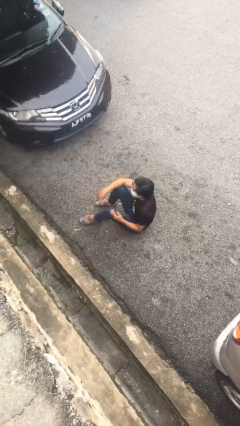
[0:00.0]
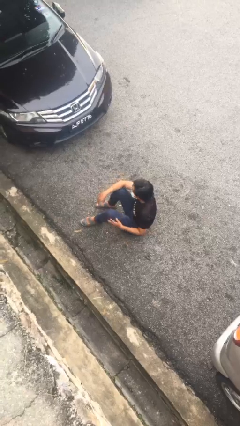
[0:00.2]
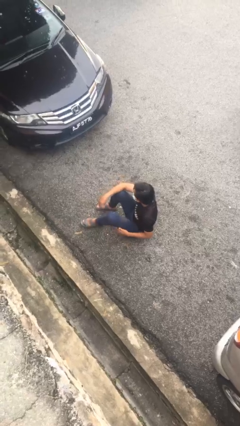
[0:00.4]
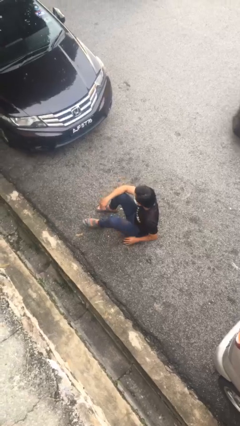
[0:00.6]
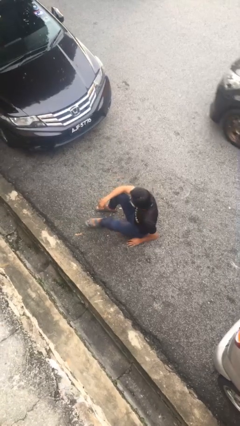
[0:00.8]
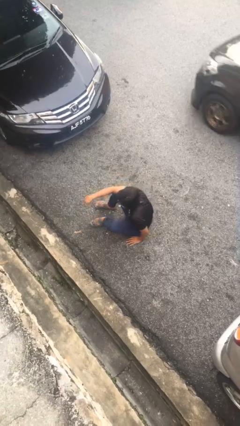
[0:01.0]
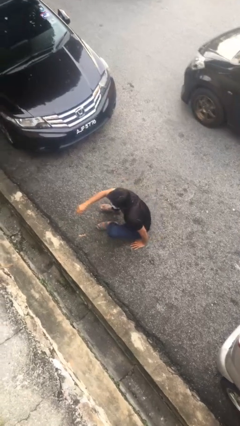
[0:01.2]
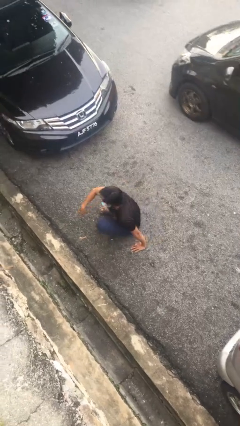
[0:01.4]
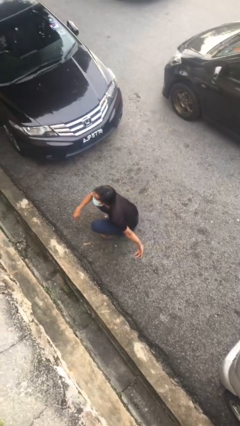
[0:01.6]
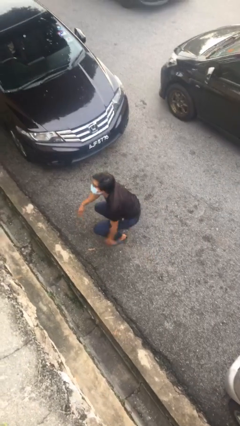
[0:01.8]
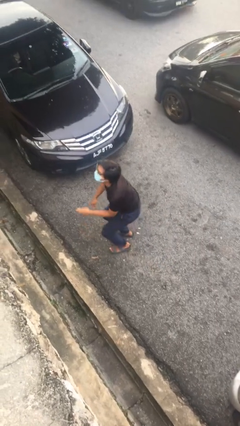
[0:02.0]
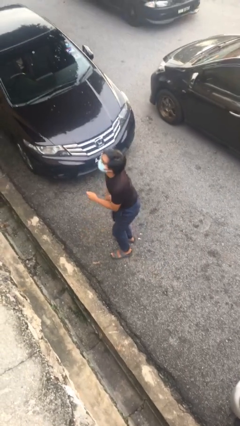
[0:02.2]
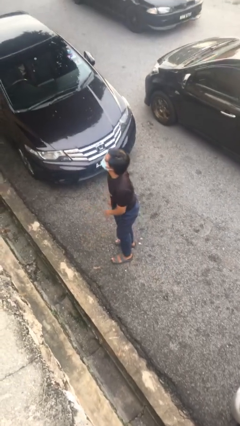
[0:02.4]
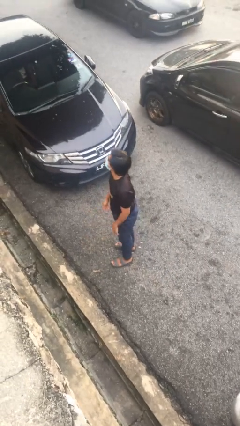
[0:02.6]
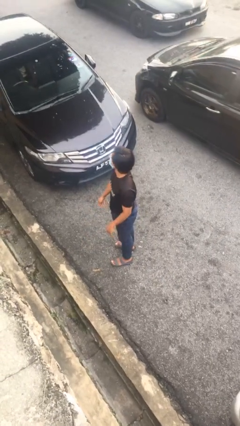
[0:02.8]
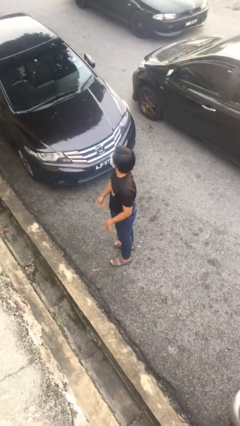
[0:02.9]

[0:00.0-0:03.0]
person stands up

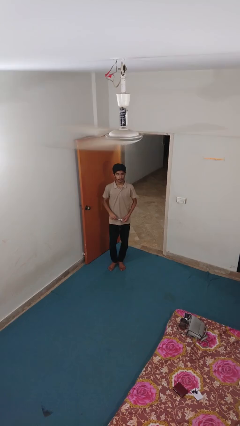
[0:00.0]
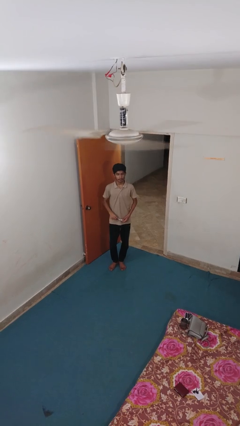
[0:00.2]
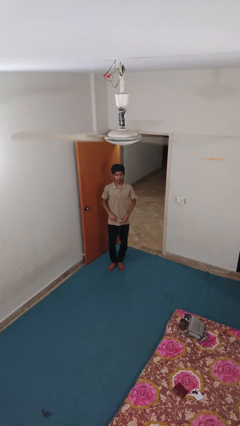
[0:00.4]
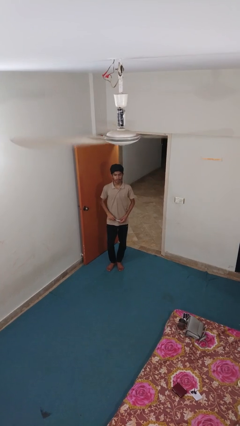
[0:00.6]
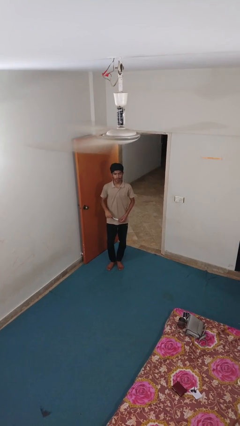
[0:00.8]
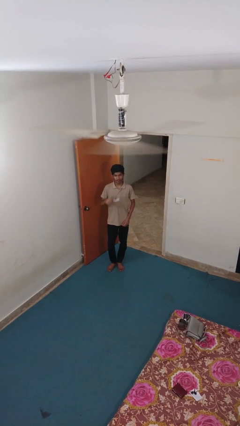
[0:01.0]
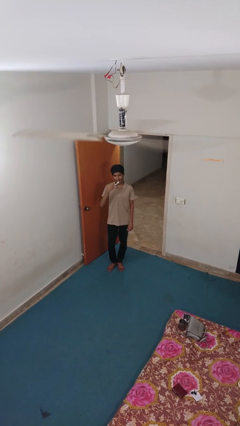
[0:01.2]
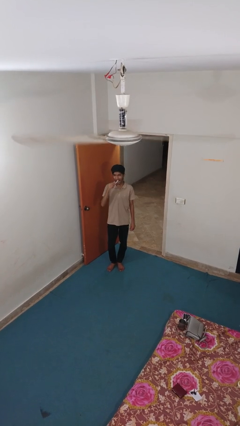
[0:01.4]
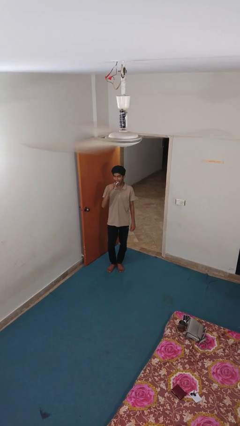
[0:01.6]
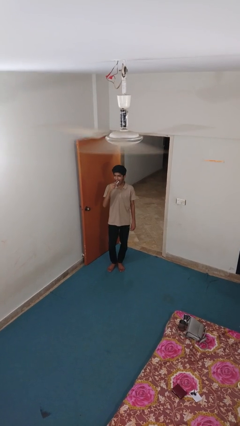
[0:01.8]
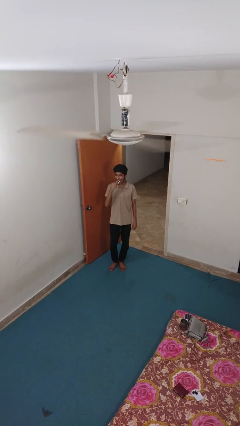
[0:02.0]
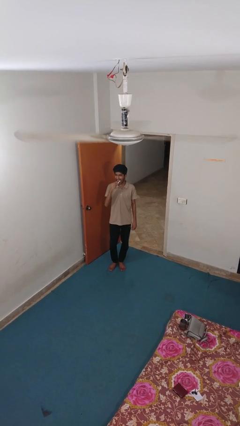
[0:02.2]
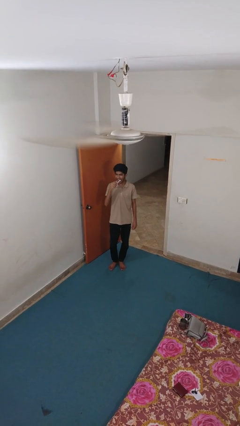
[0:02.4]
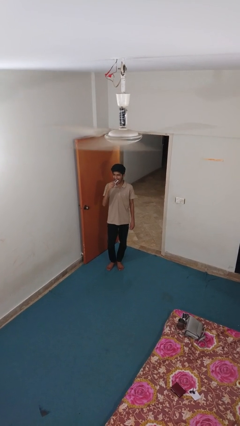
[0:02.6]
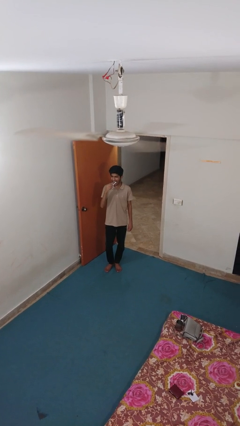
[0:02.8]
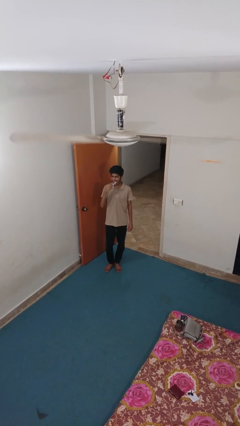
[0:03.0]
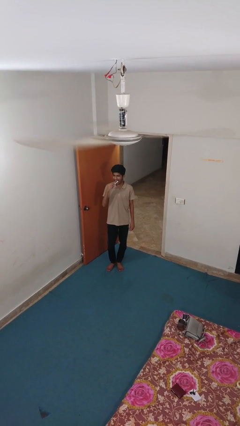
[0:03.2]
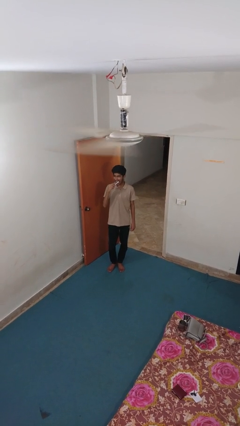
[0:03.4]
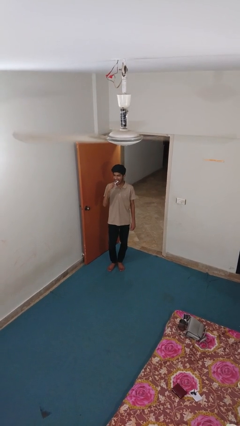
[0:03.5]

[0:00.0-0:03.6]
person brushes teeth

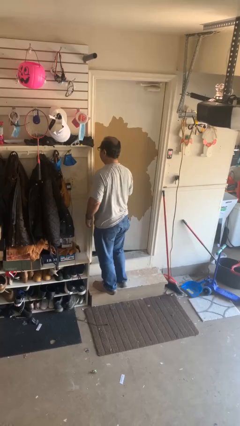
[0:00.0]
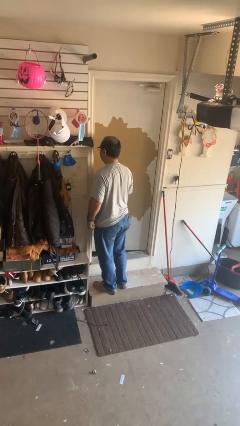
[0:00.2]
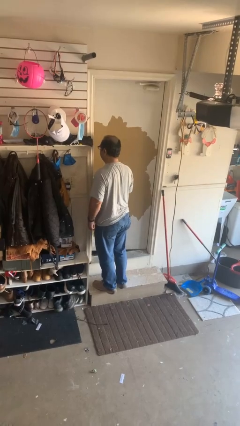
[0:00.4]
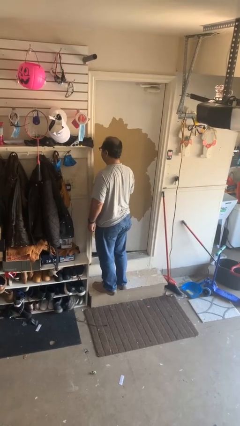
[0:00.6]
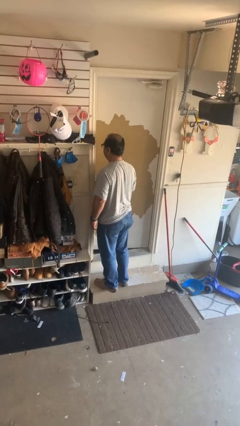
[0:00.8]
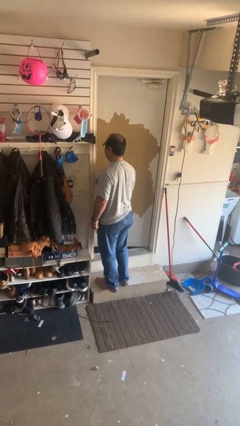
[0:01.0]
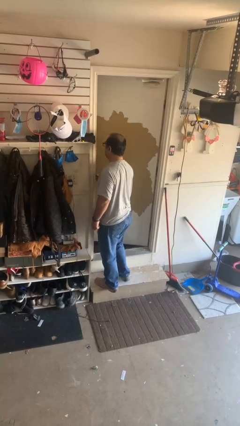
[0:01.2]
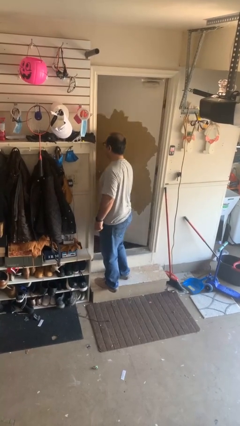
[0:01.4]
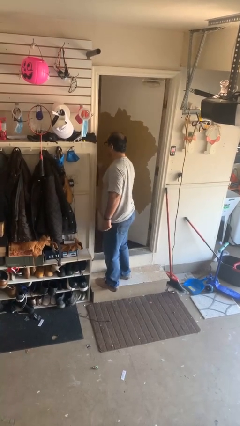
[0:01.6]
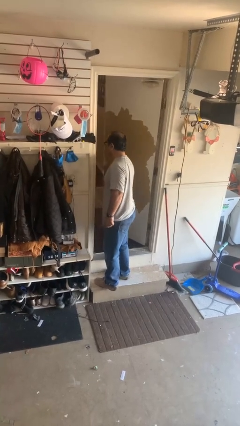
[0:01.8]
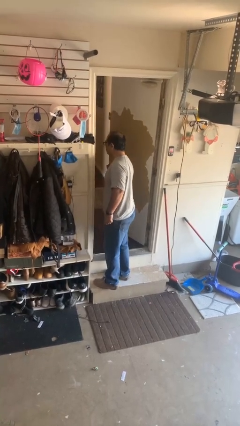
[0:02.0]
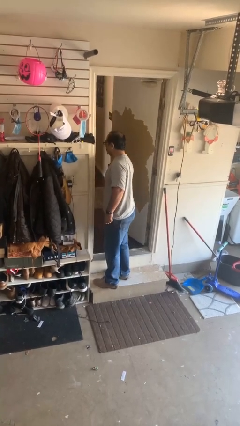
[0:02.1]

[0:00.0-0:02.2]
person opens facility door

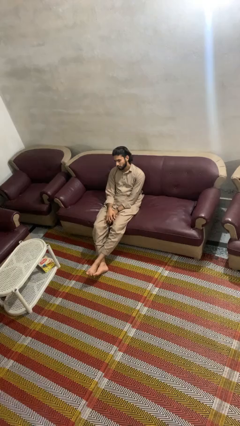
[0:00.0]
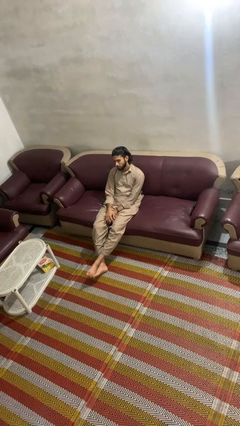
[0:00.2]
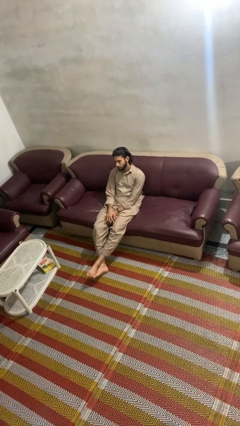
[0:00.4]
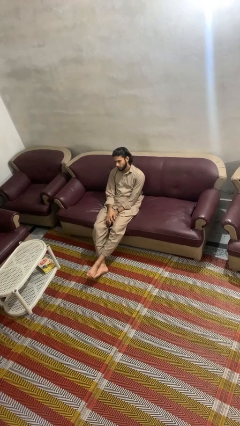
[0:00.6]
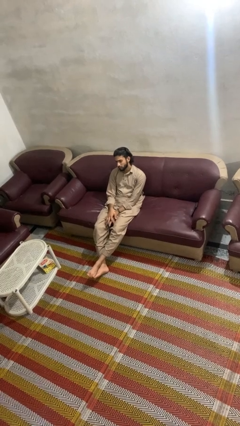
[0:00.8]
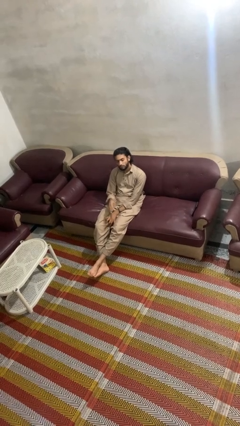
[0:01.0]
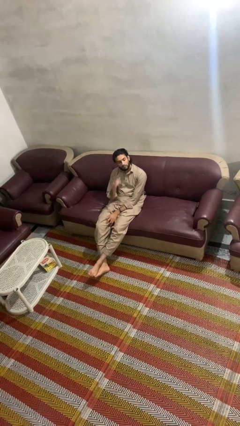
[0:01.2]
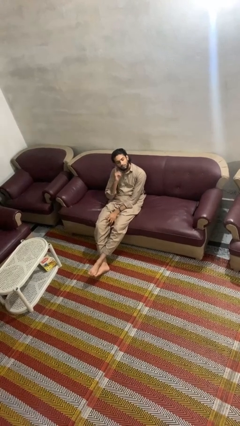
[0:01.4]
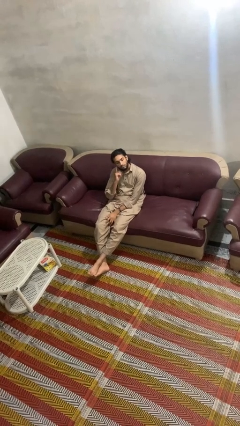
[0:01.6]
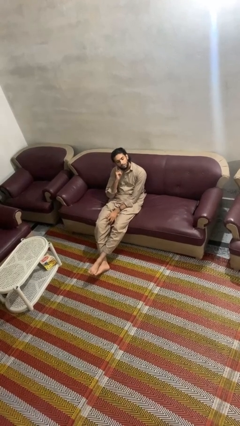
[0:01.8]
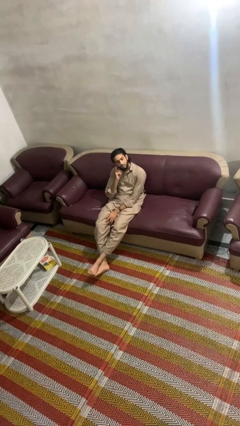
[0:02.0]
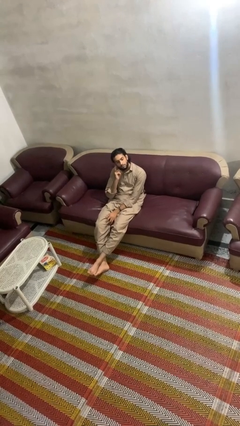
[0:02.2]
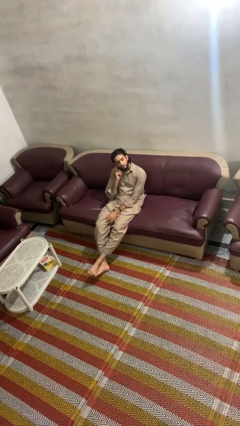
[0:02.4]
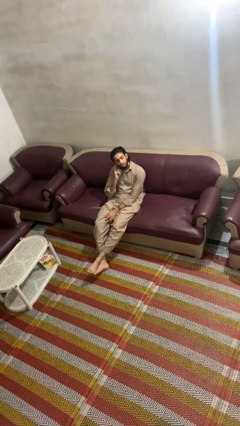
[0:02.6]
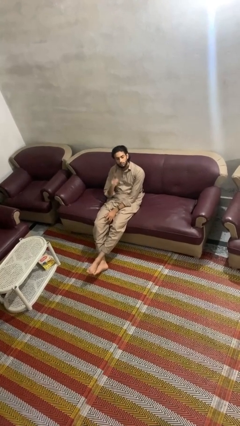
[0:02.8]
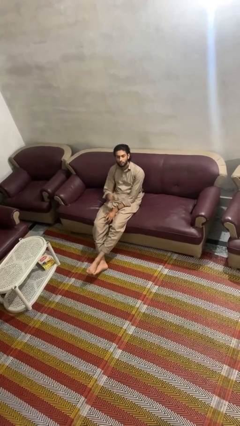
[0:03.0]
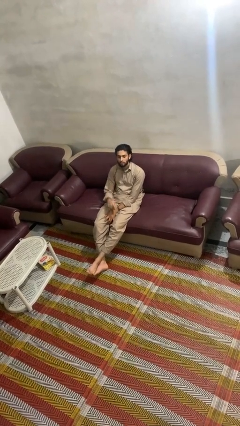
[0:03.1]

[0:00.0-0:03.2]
person gestures listen closely

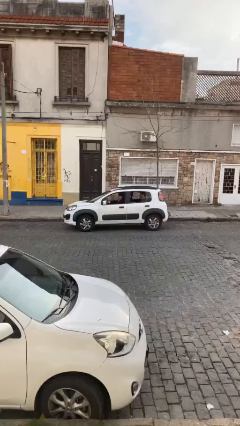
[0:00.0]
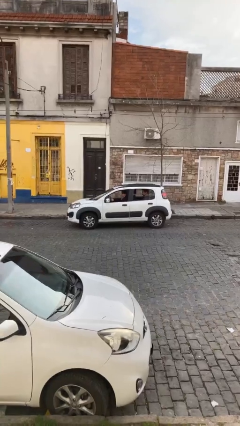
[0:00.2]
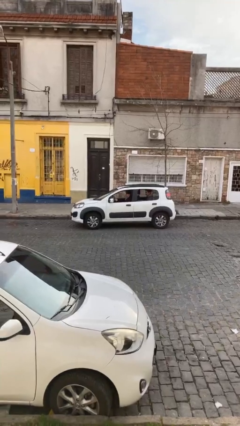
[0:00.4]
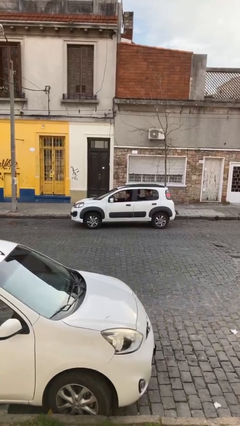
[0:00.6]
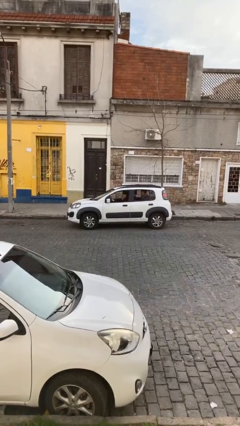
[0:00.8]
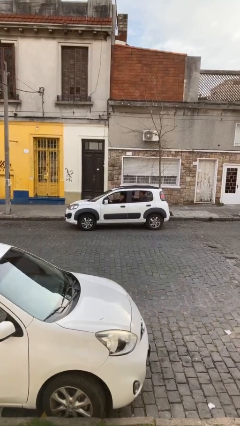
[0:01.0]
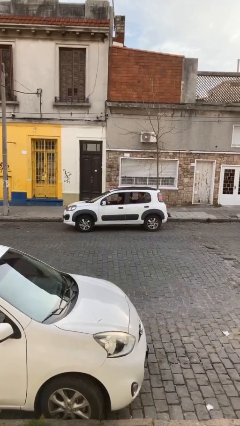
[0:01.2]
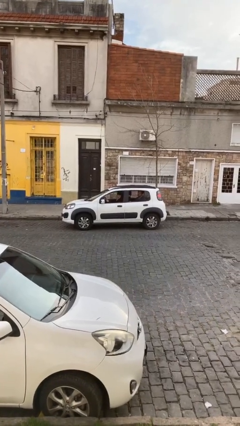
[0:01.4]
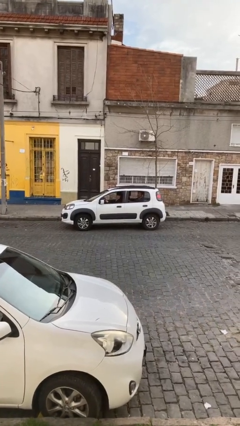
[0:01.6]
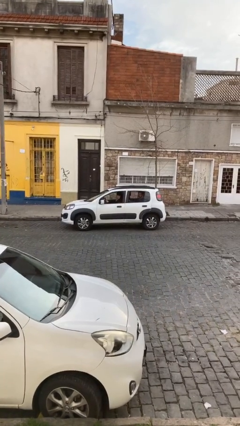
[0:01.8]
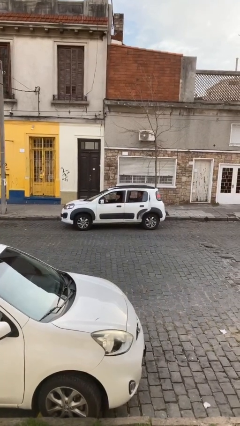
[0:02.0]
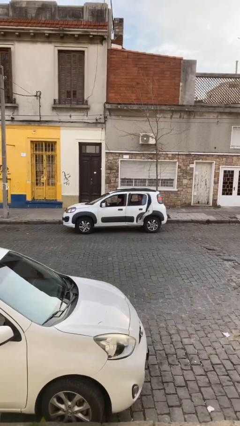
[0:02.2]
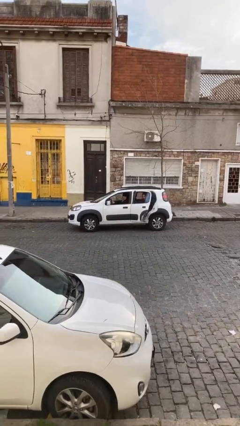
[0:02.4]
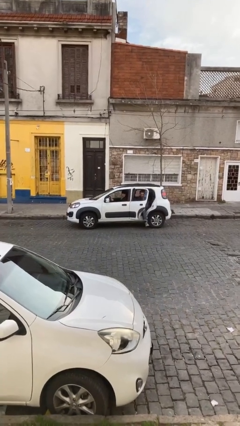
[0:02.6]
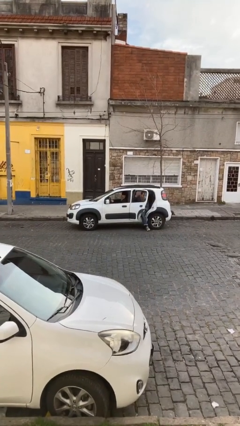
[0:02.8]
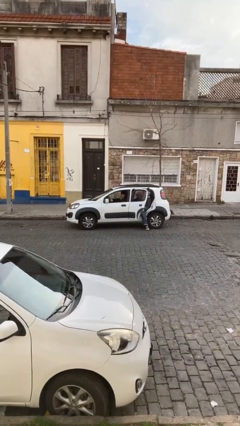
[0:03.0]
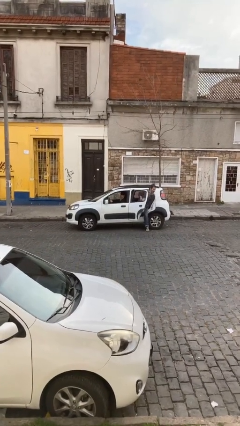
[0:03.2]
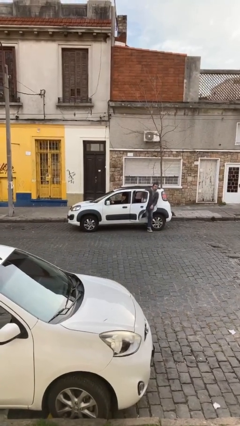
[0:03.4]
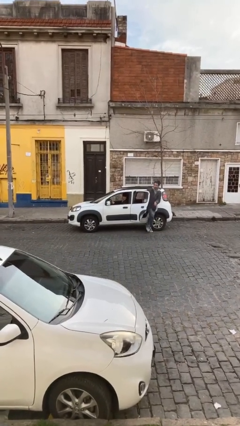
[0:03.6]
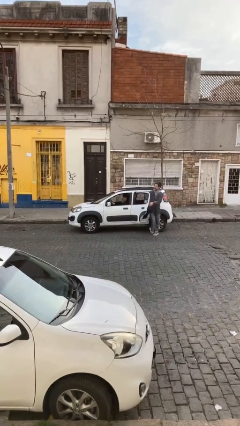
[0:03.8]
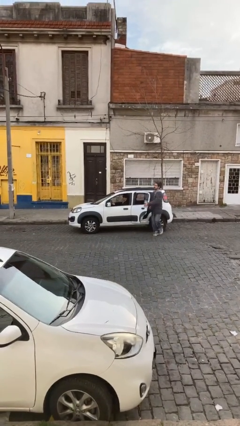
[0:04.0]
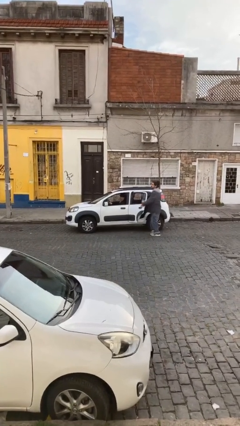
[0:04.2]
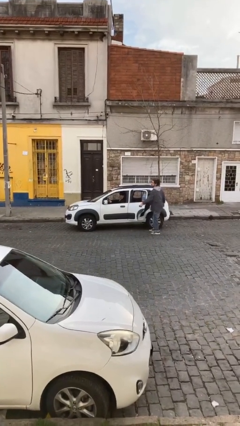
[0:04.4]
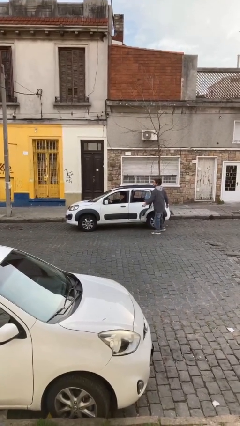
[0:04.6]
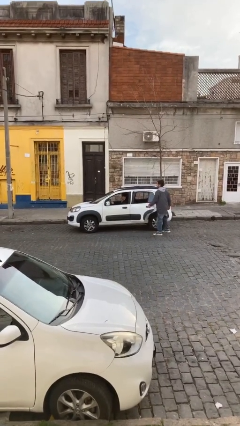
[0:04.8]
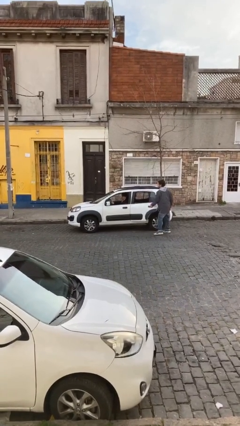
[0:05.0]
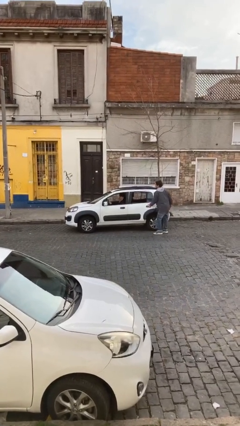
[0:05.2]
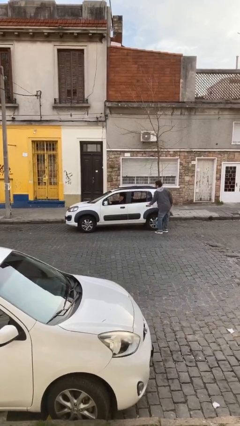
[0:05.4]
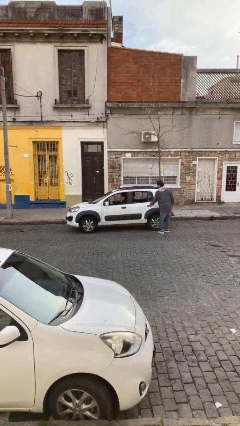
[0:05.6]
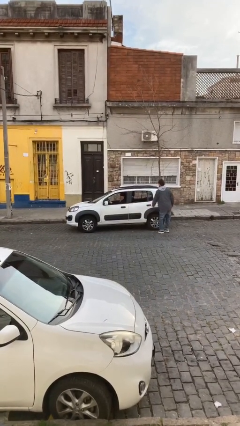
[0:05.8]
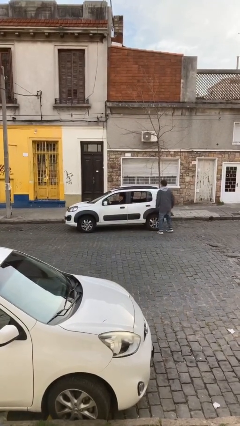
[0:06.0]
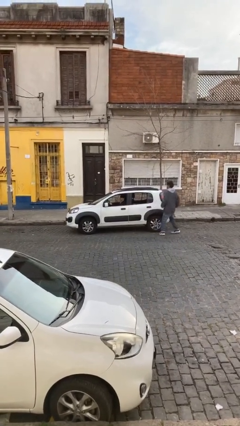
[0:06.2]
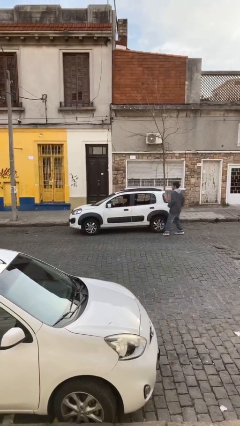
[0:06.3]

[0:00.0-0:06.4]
car drops off person
